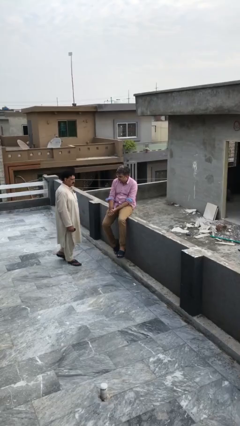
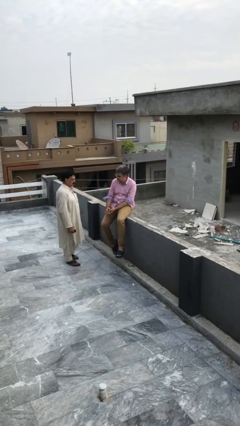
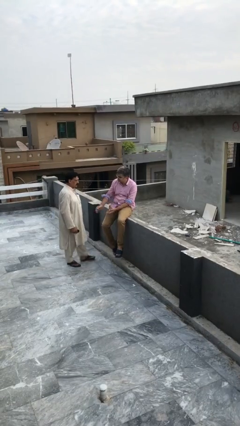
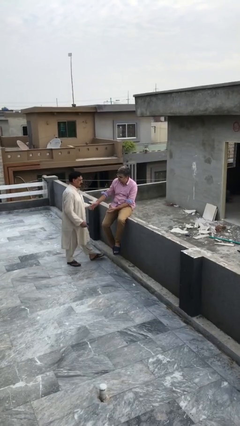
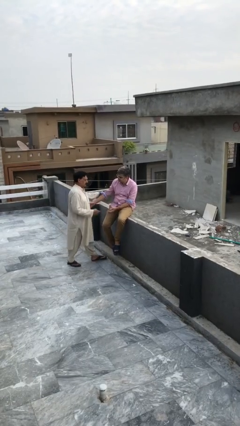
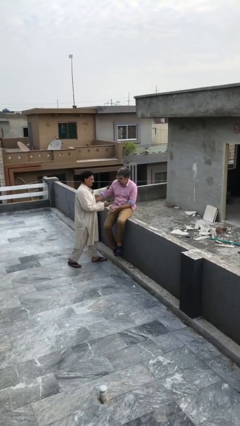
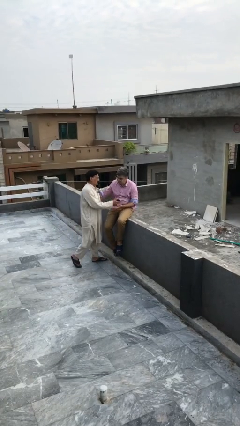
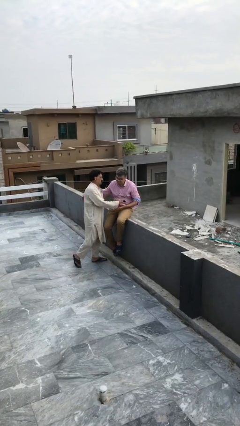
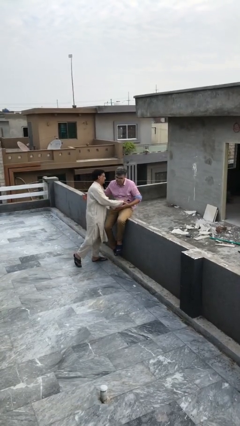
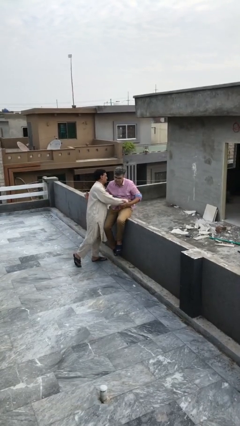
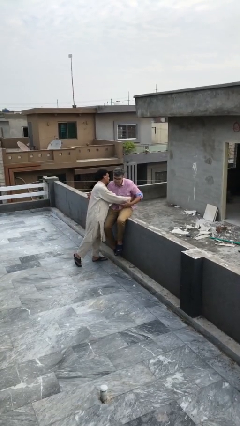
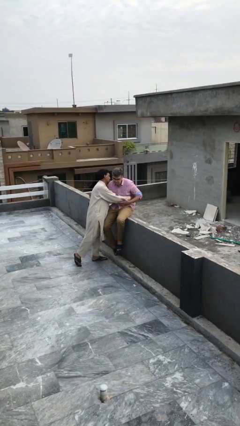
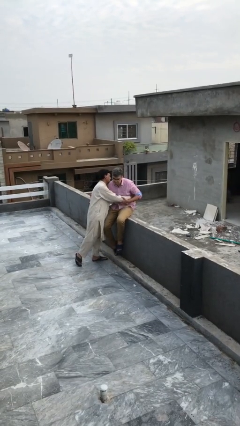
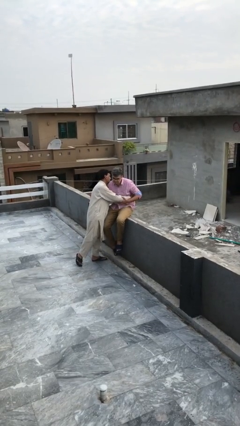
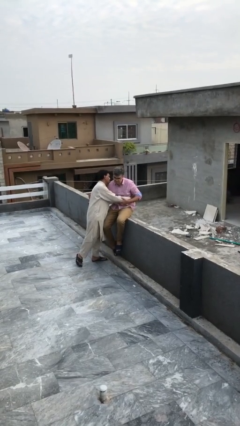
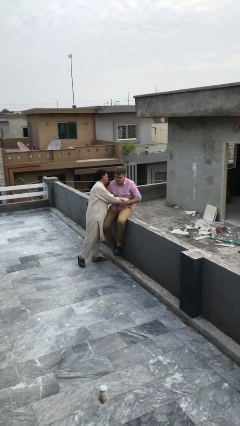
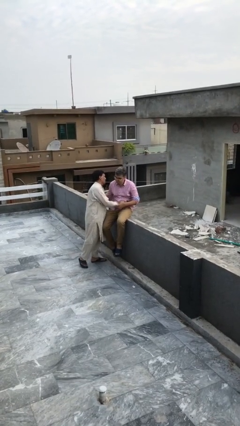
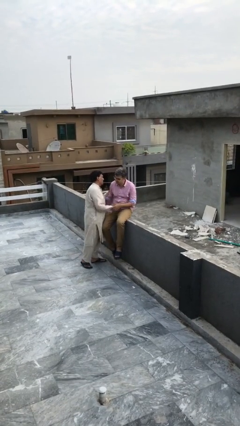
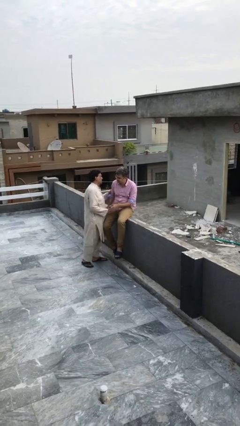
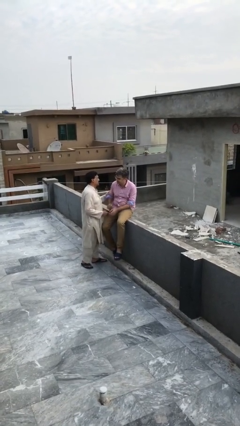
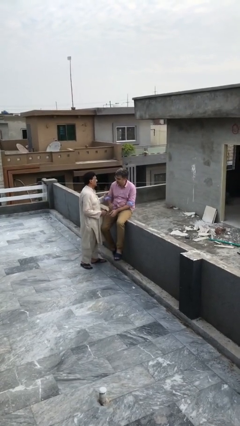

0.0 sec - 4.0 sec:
person embraces person

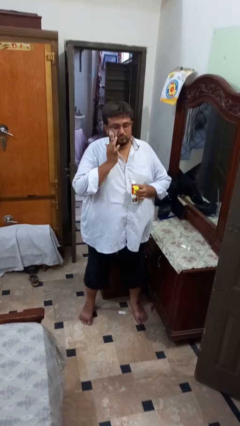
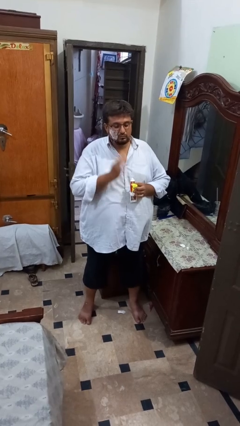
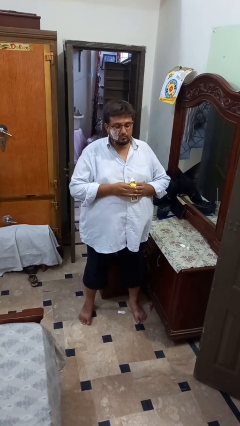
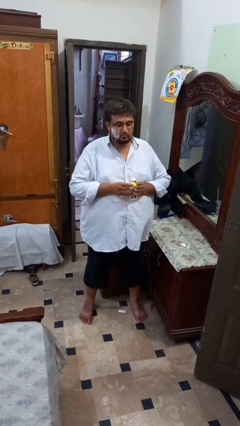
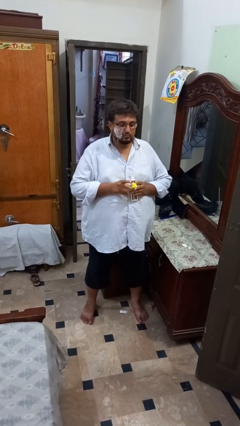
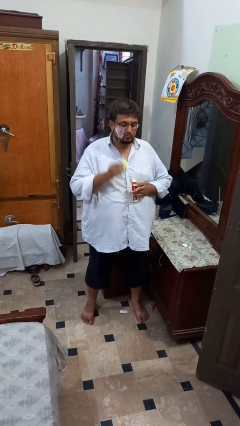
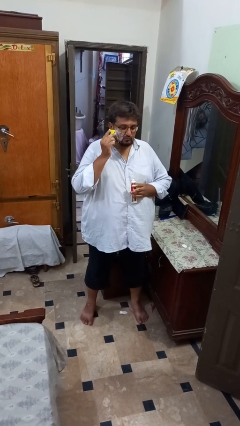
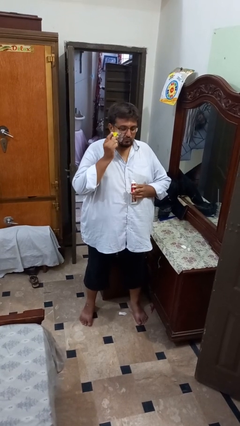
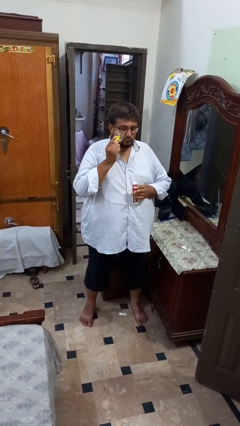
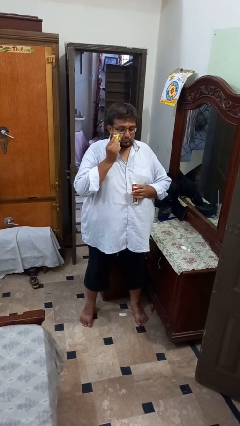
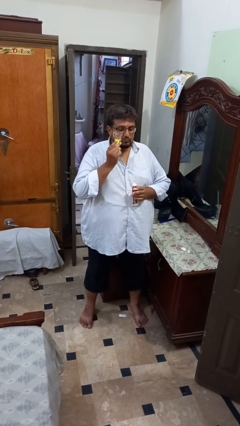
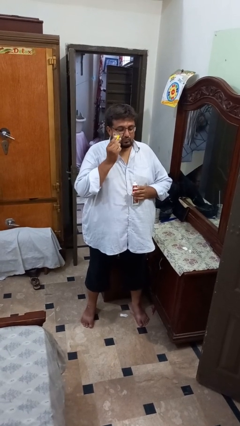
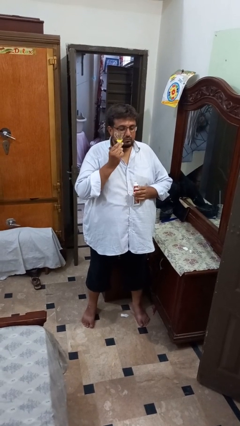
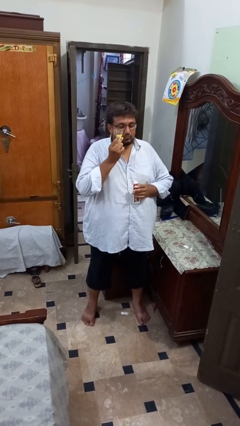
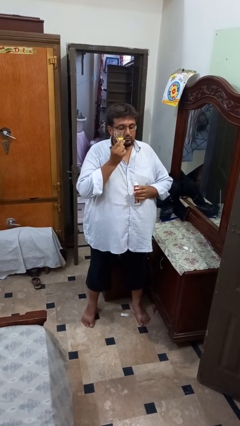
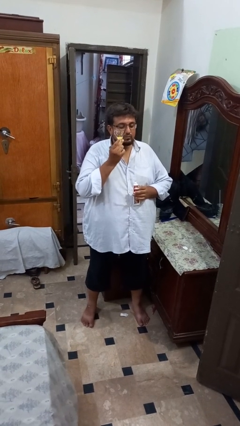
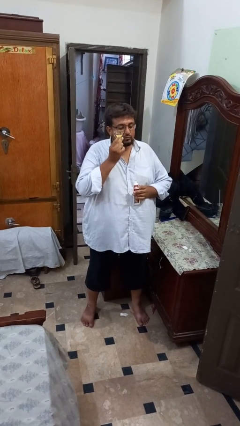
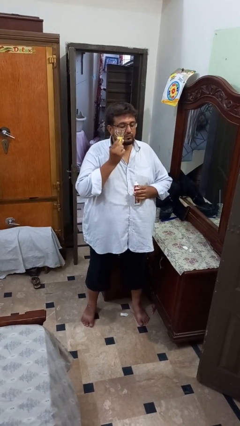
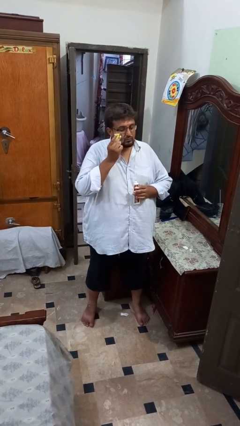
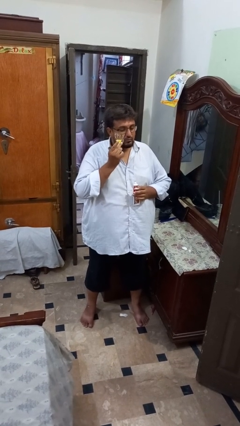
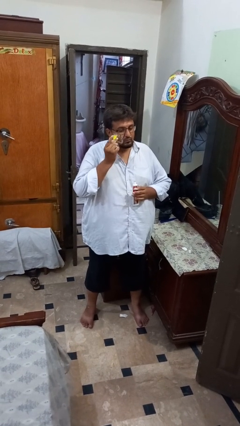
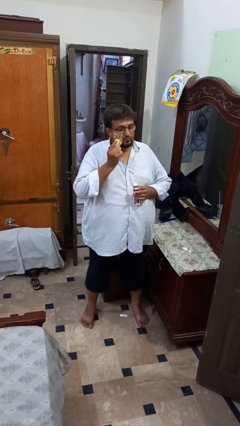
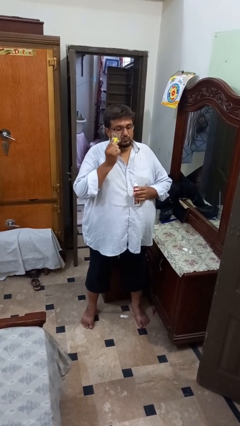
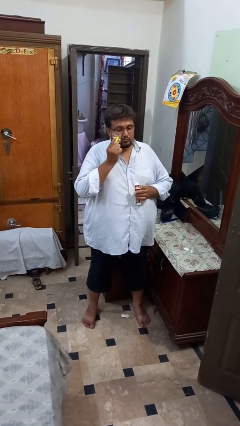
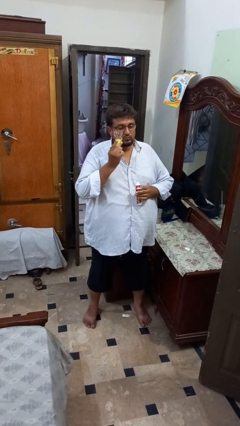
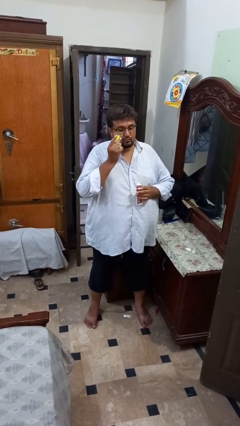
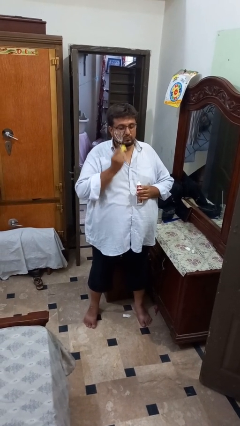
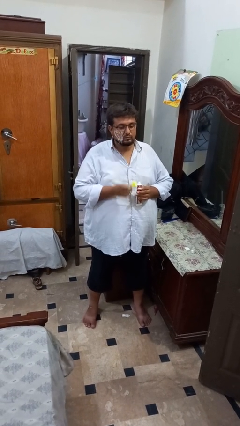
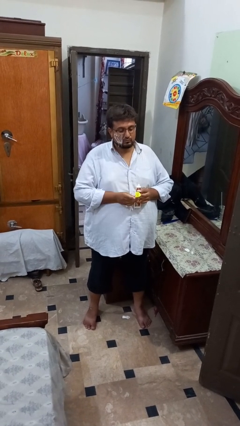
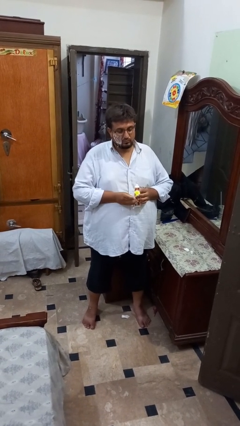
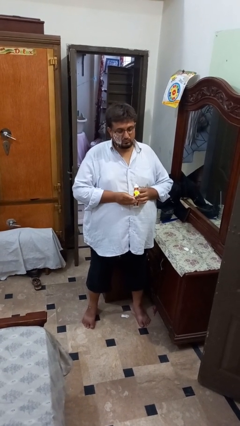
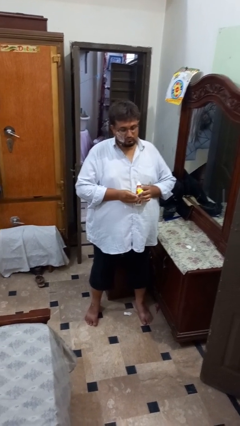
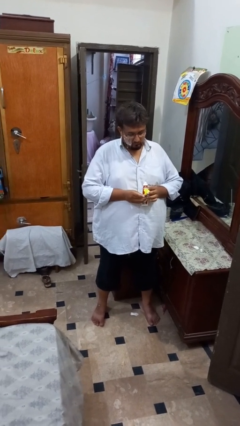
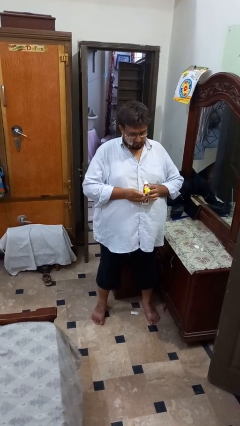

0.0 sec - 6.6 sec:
person shaves face

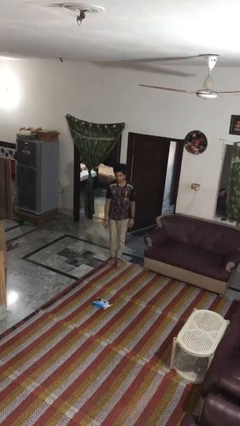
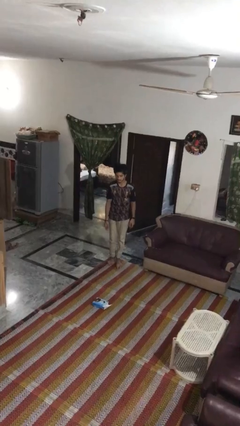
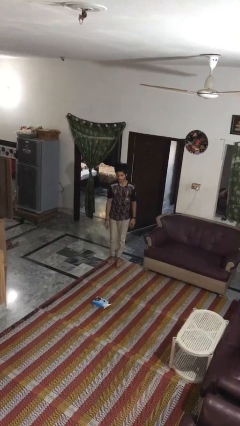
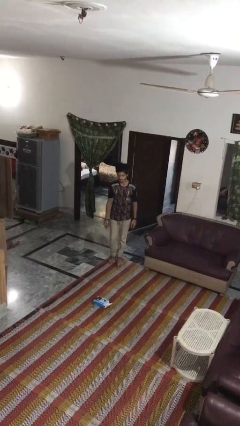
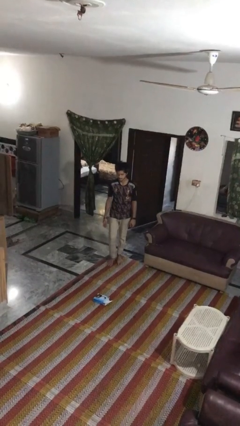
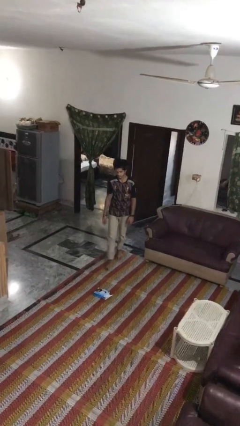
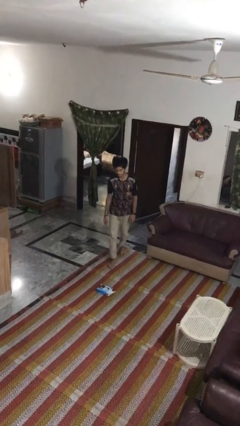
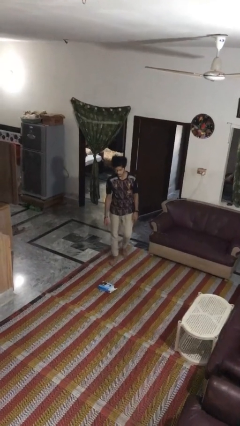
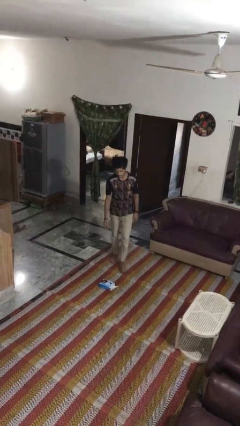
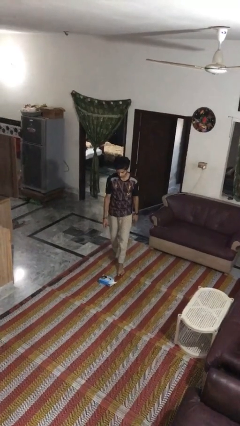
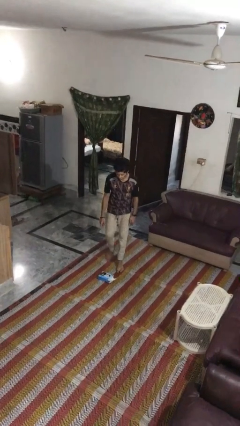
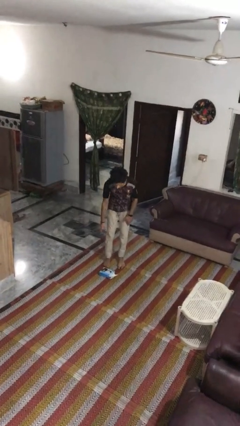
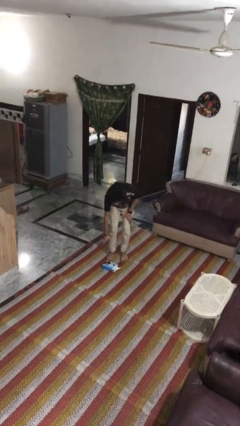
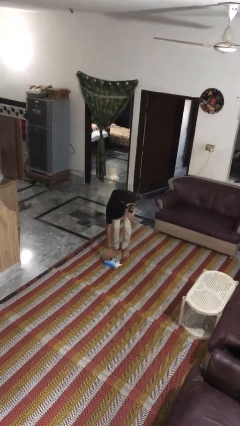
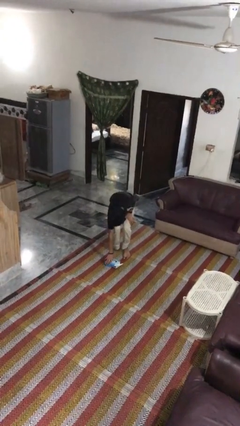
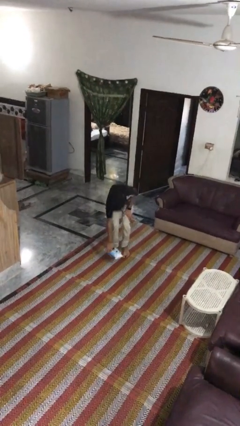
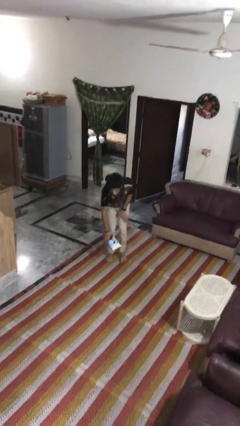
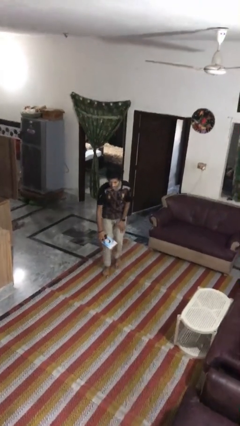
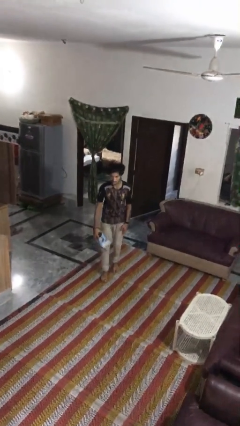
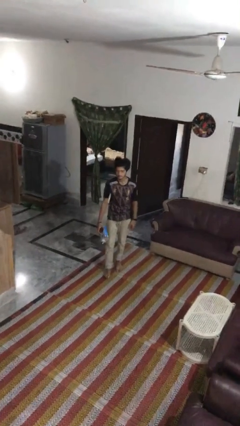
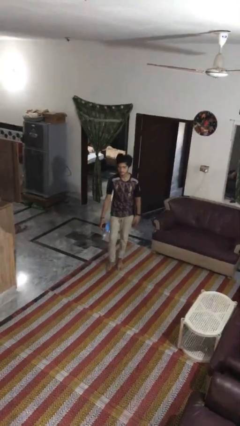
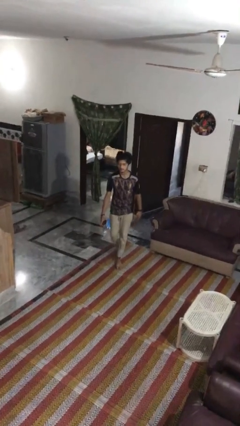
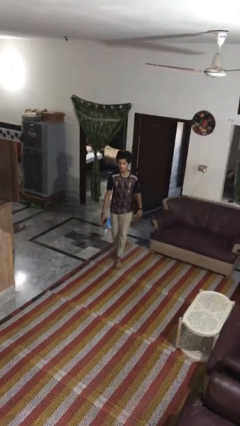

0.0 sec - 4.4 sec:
person picks up object from floor

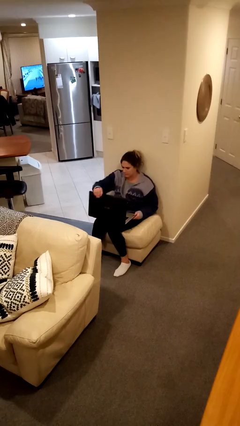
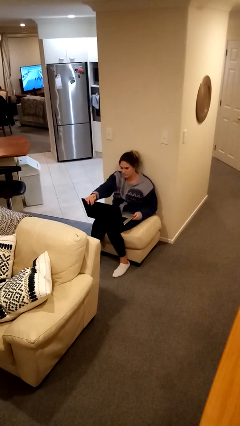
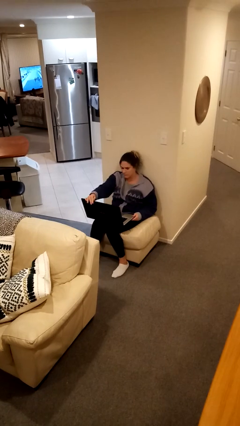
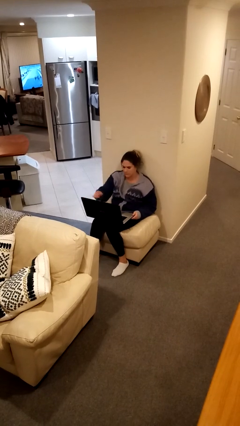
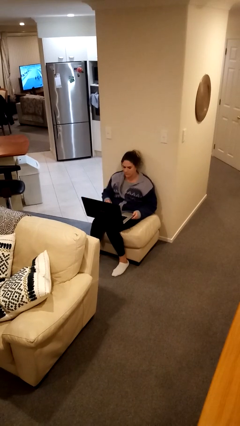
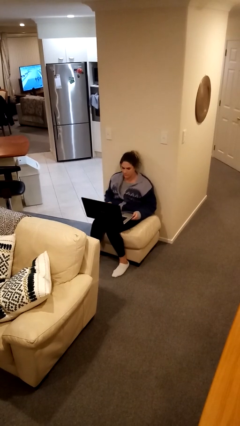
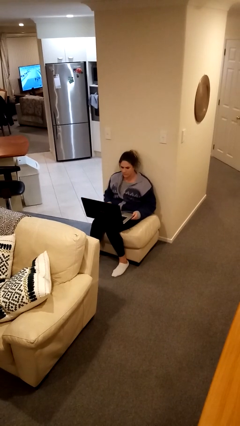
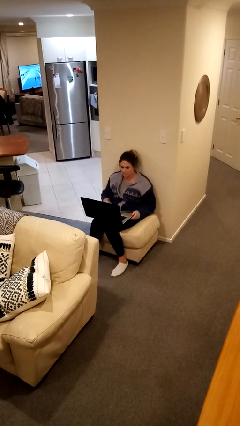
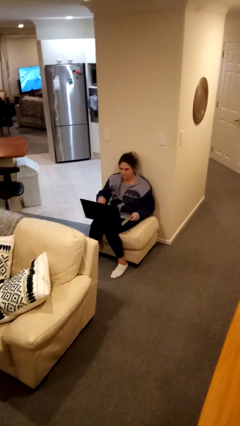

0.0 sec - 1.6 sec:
person opens laptop

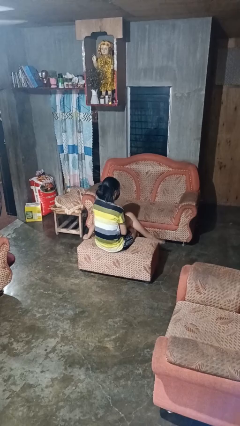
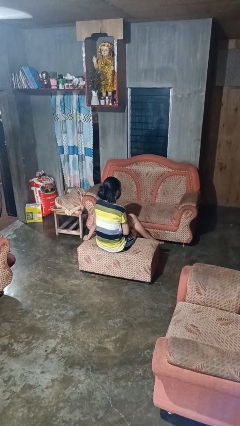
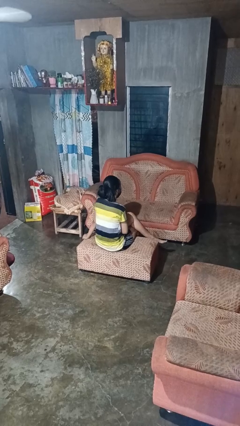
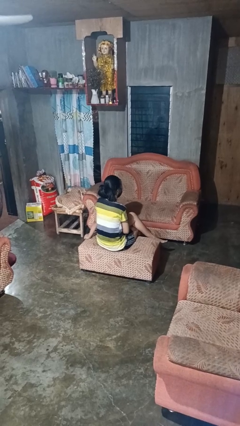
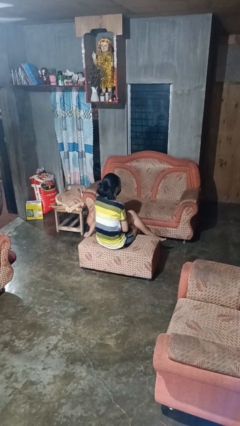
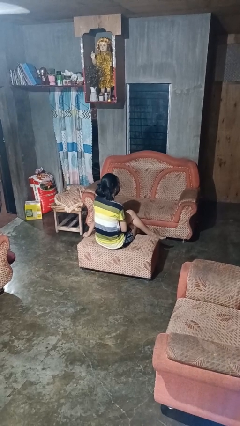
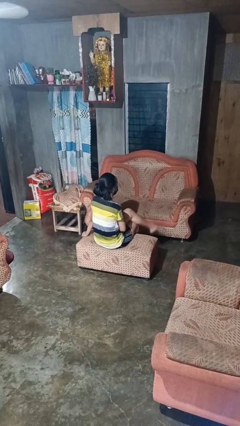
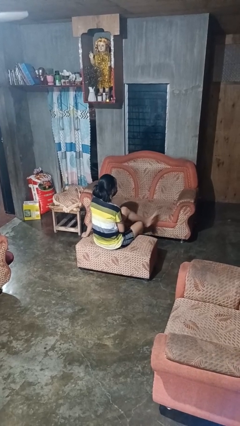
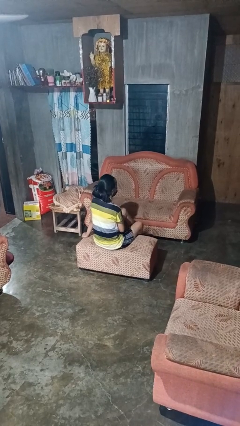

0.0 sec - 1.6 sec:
person crosses legs
